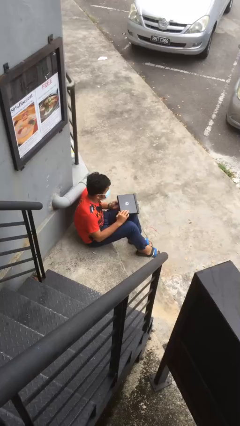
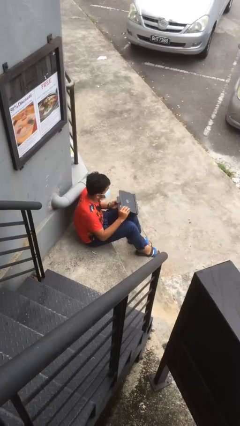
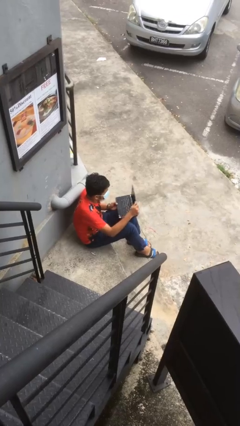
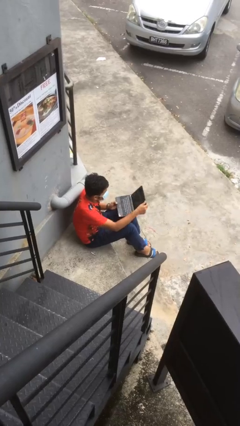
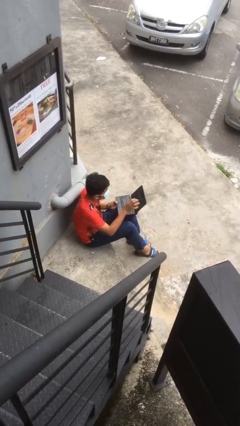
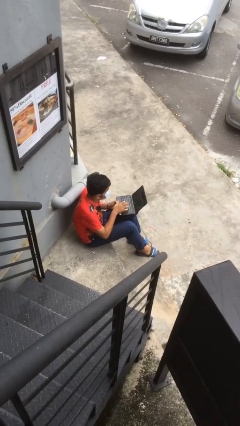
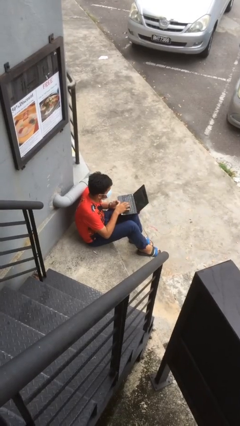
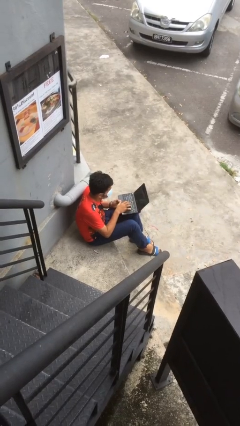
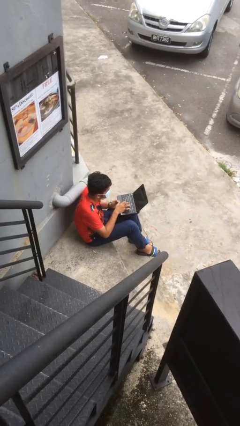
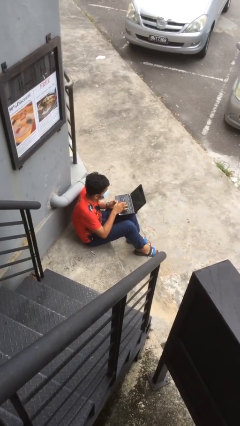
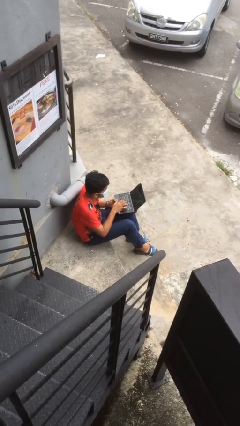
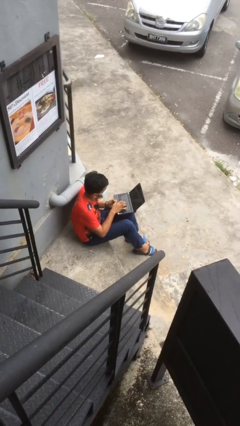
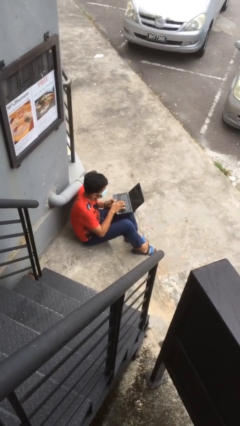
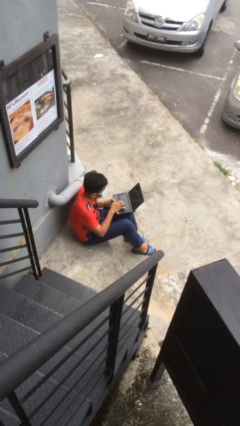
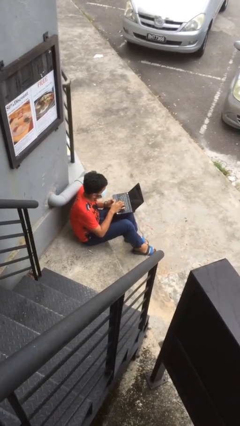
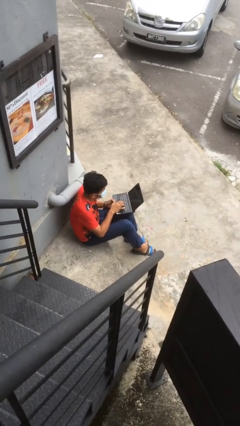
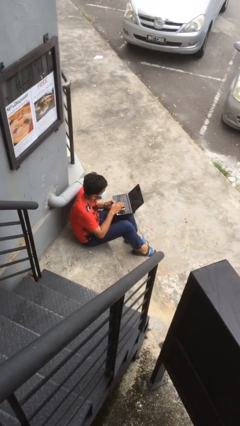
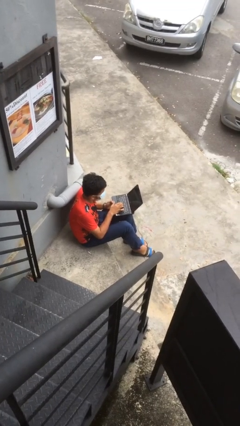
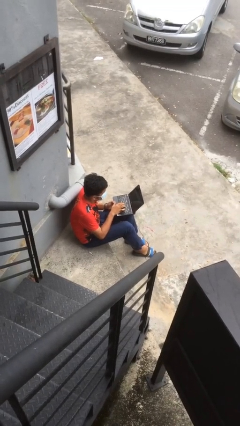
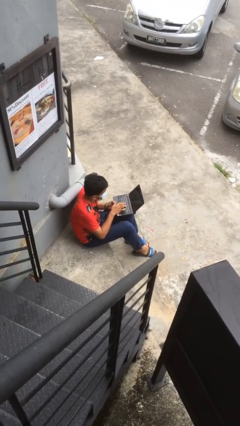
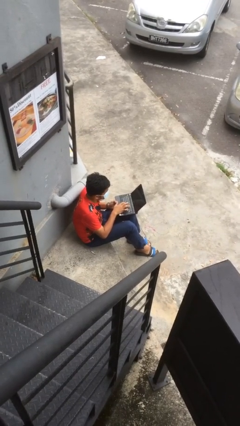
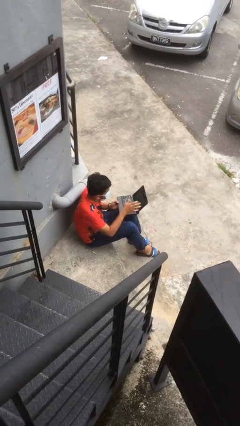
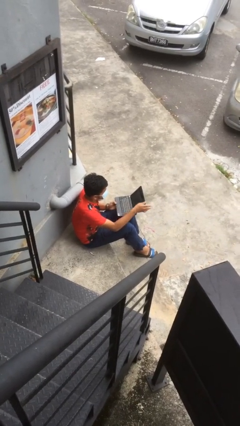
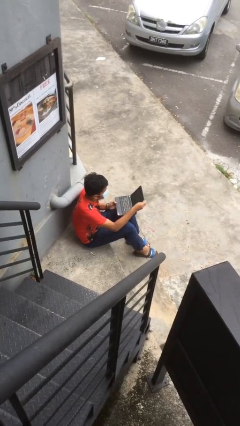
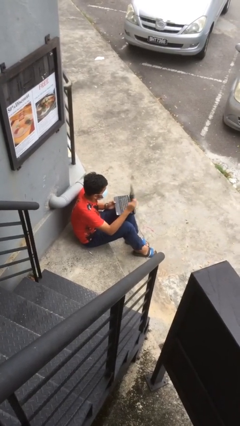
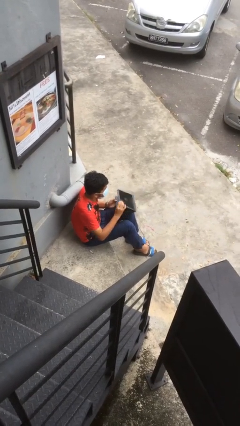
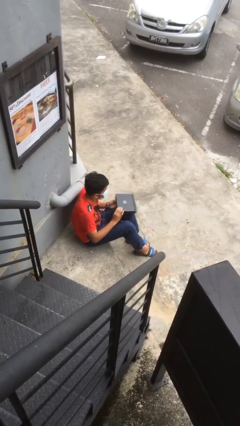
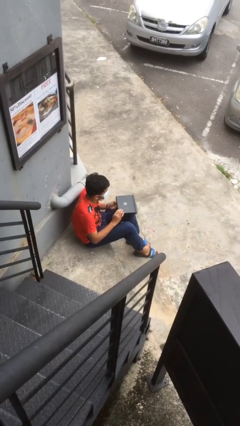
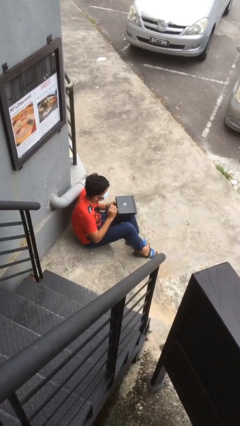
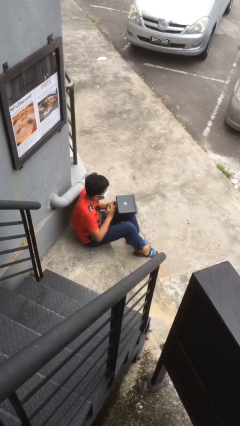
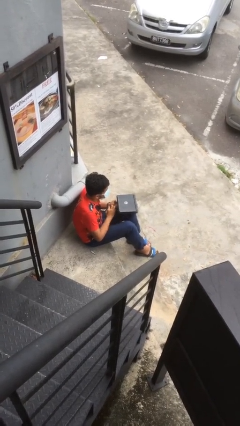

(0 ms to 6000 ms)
person interacts with laptop

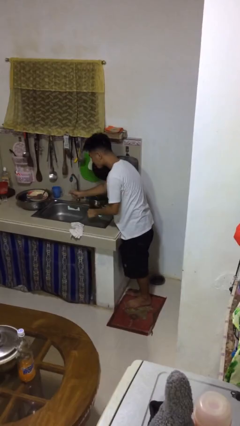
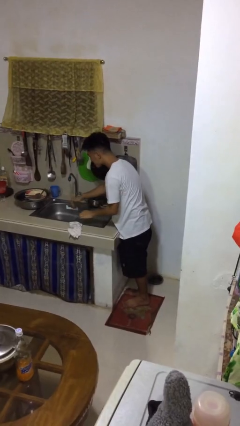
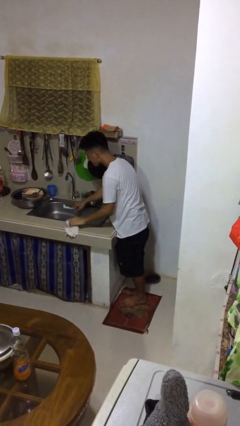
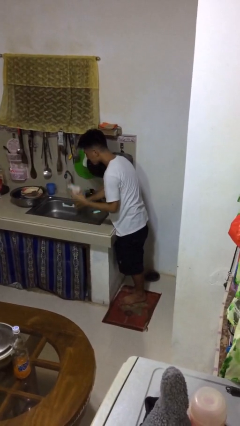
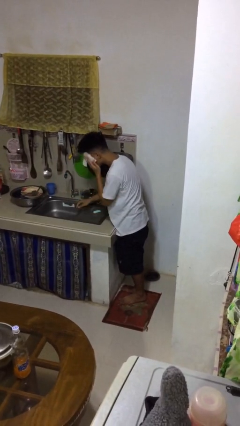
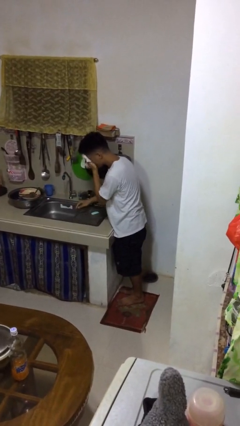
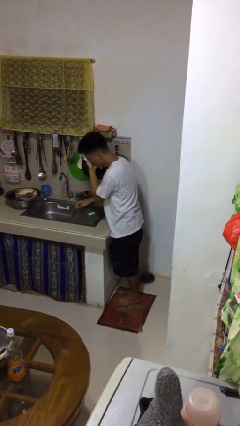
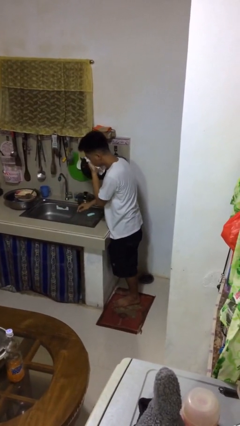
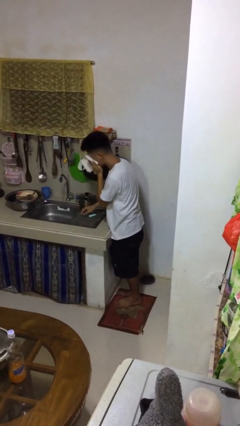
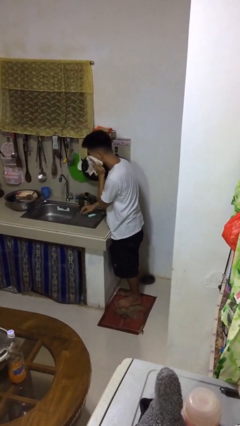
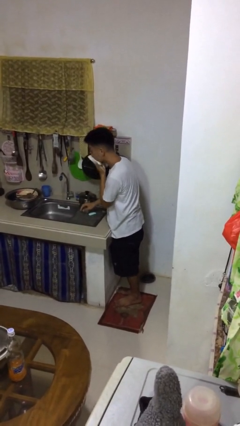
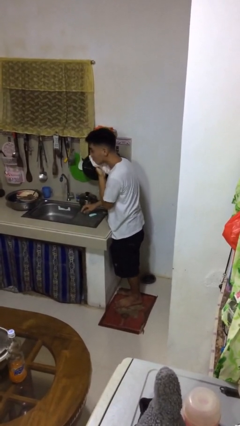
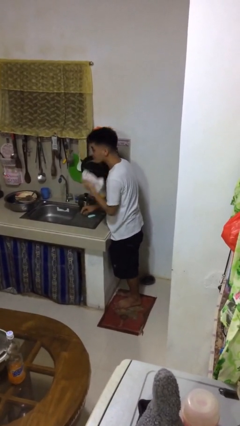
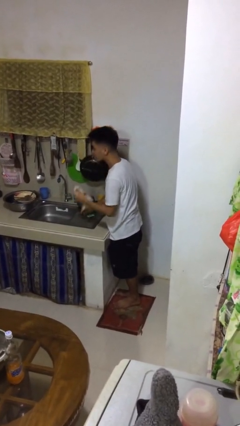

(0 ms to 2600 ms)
person dries face with towel

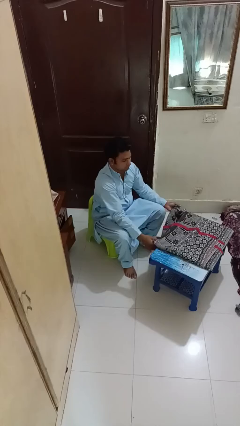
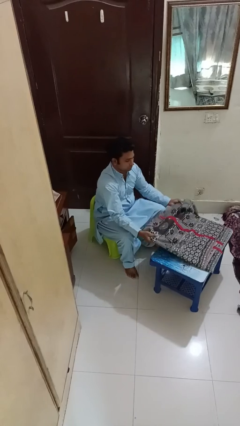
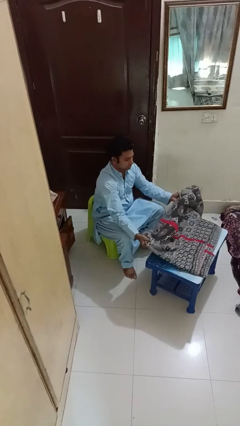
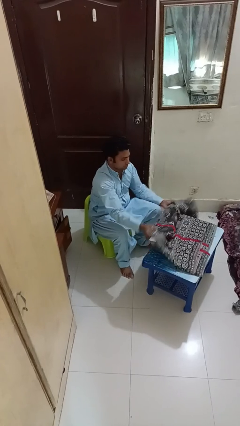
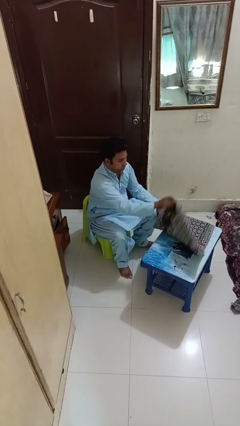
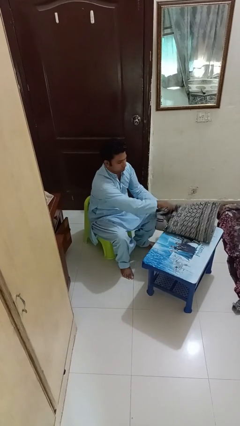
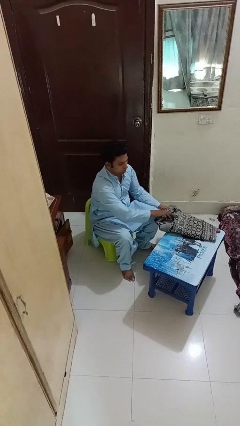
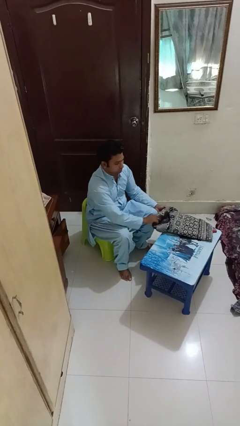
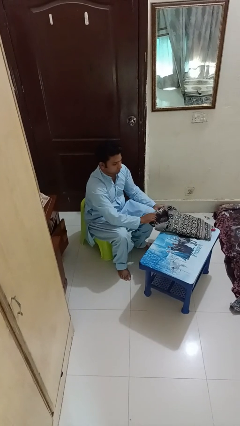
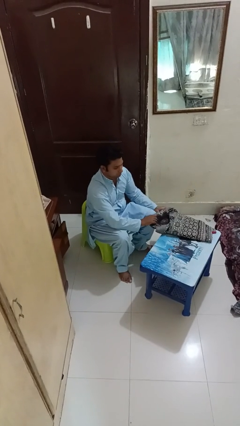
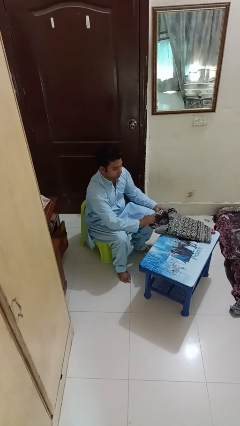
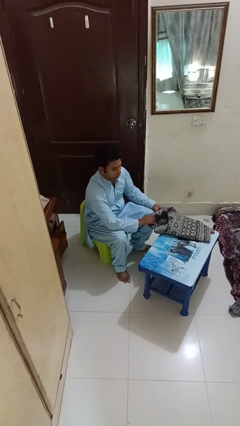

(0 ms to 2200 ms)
person folds blanket

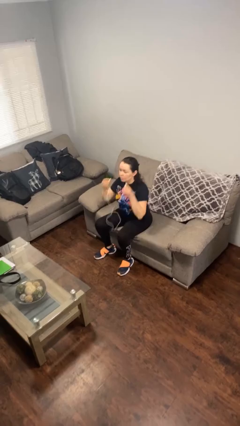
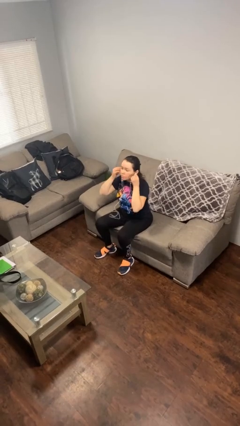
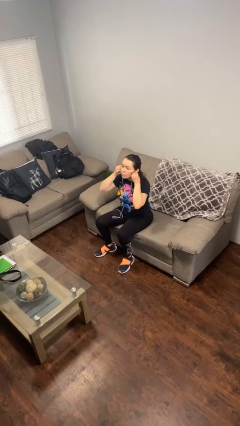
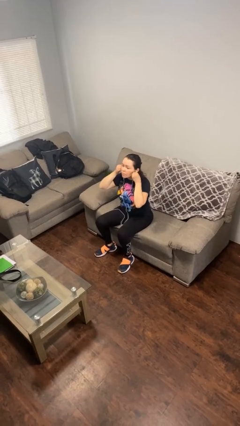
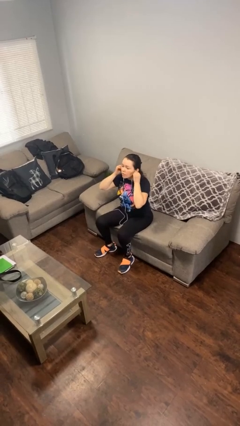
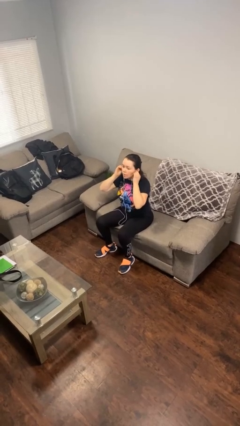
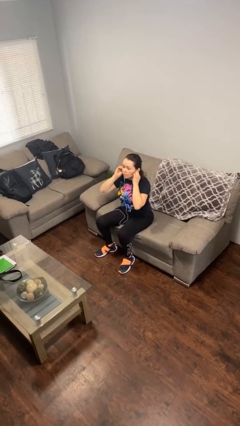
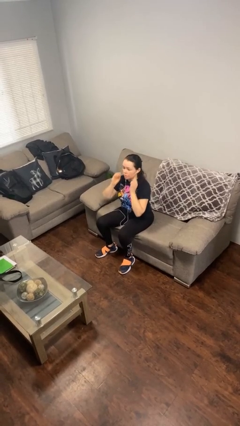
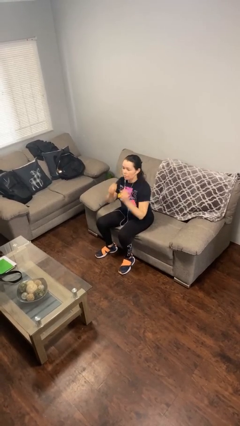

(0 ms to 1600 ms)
person puts on headphones

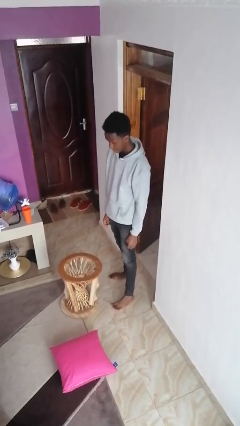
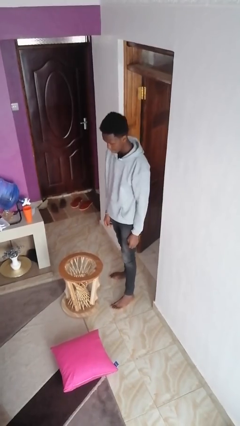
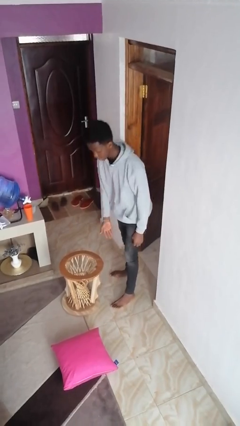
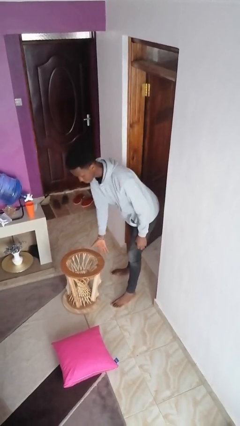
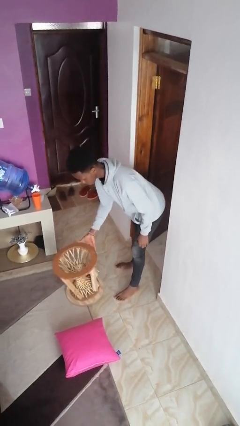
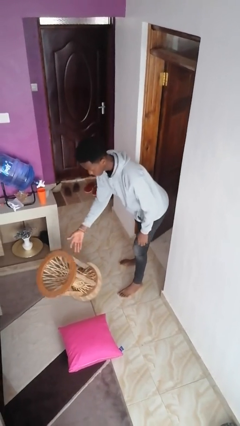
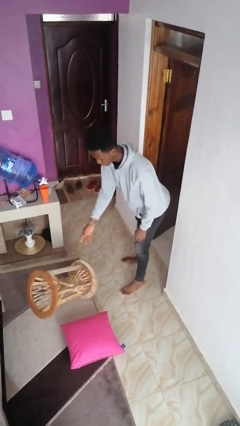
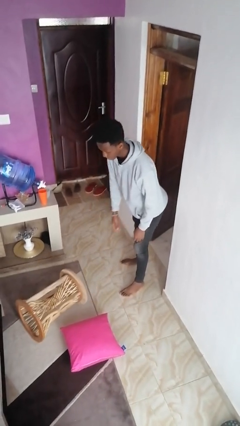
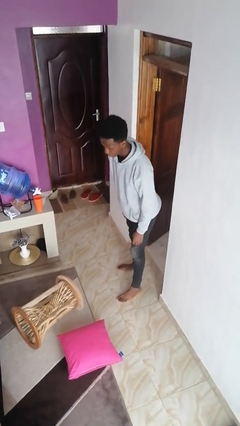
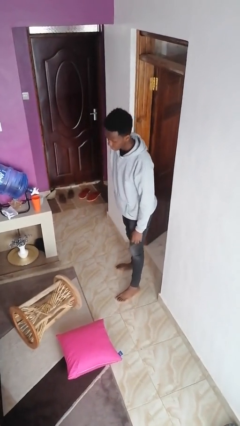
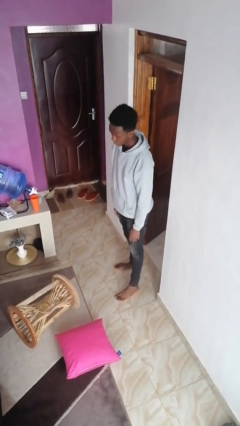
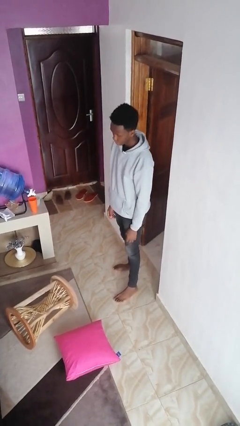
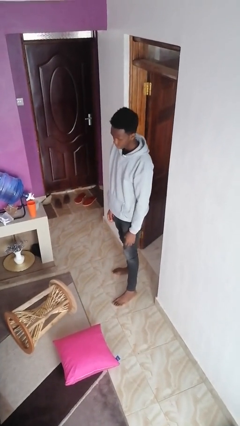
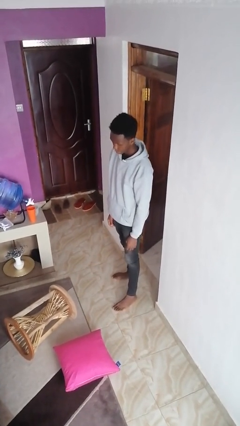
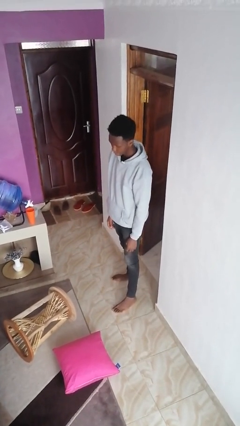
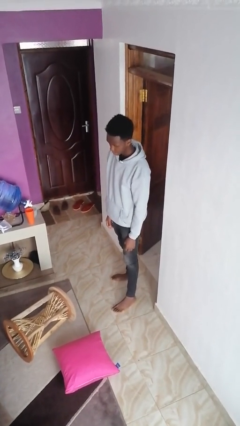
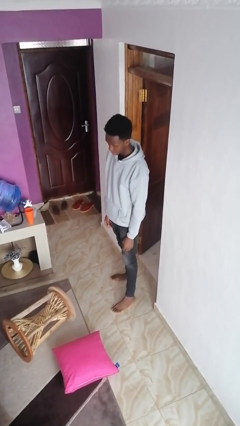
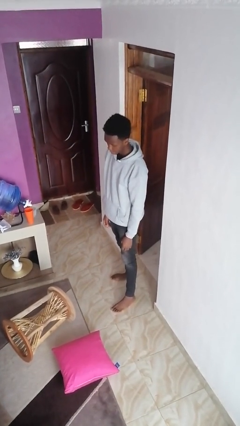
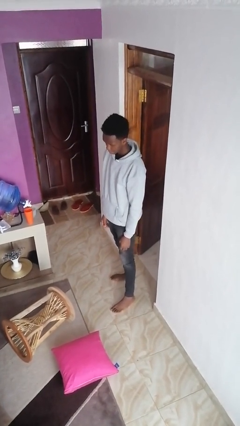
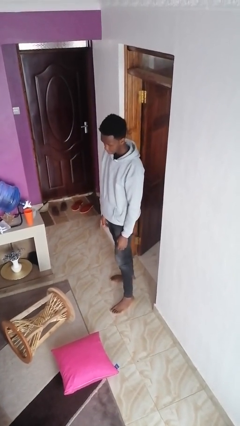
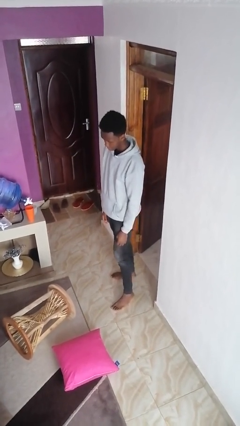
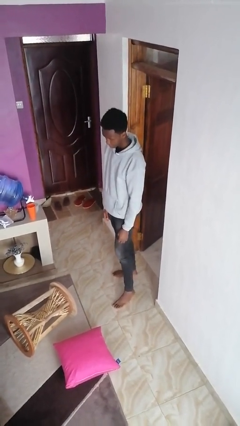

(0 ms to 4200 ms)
person knocks over furniture

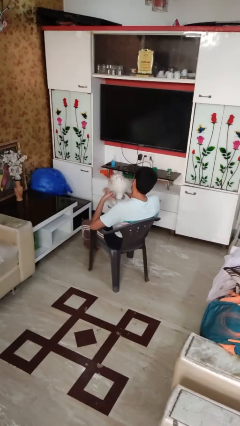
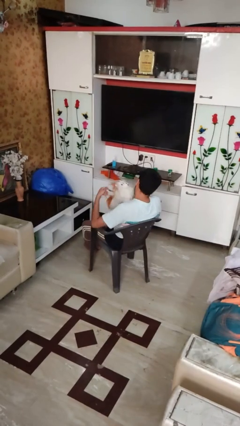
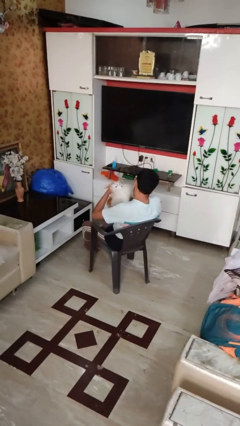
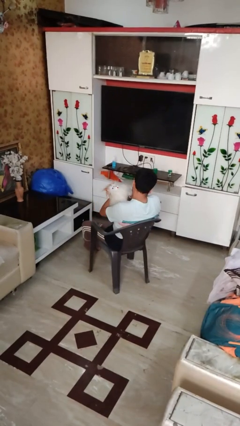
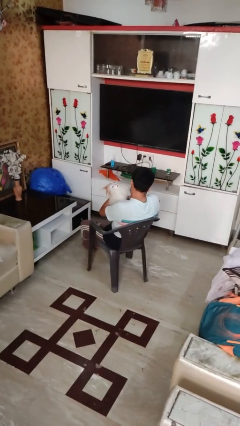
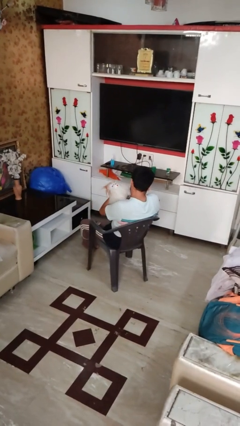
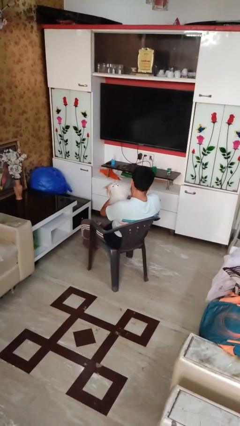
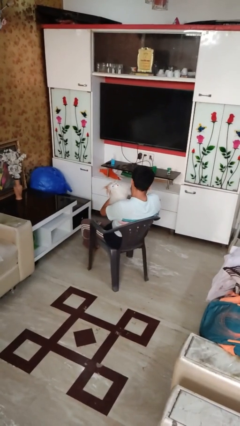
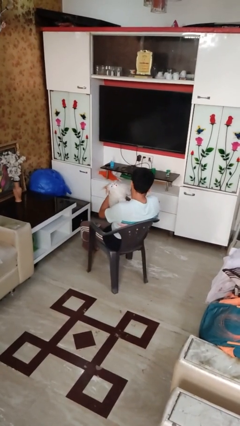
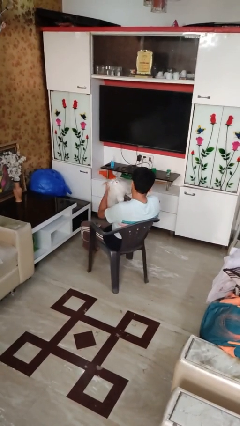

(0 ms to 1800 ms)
person hugs stuffed animal
